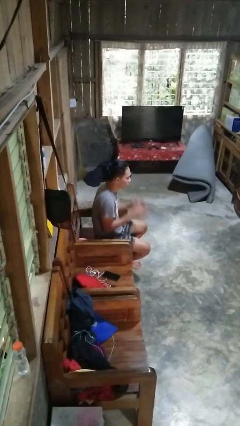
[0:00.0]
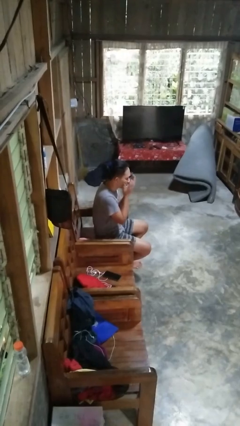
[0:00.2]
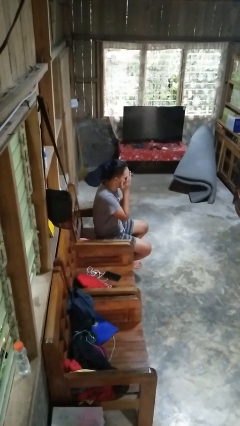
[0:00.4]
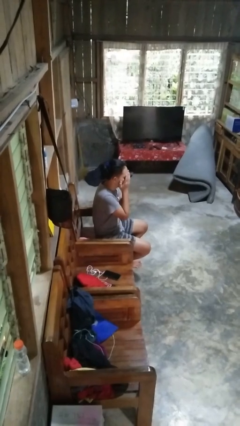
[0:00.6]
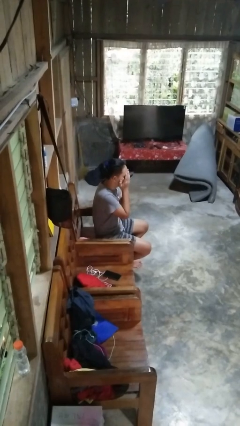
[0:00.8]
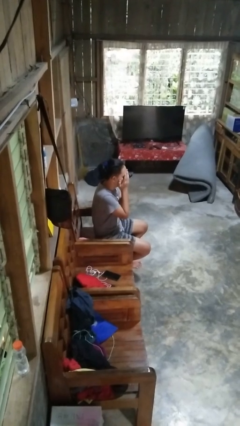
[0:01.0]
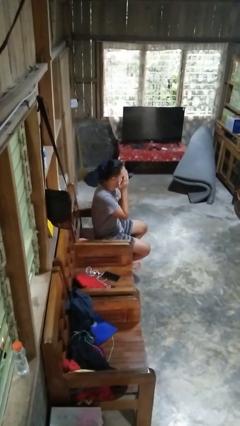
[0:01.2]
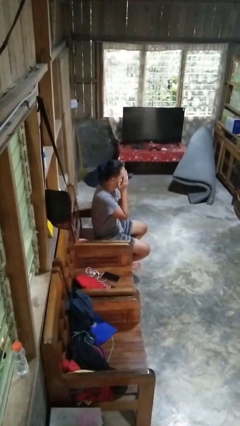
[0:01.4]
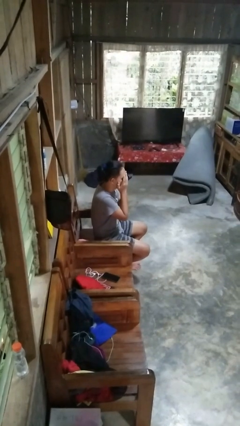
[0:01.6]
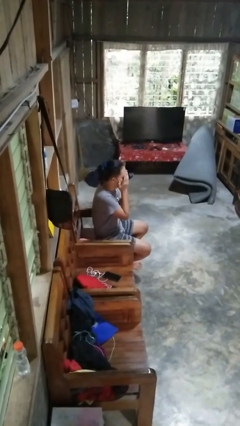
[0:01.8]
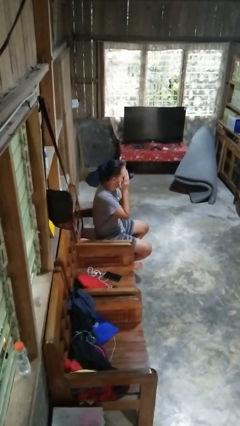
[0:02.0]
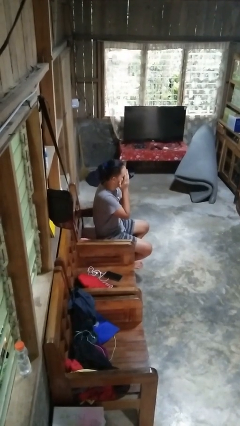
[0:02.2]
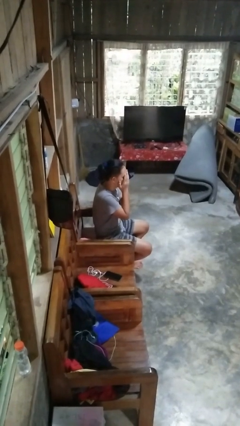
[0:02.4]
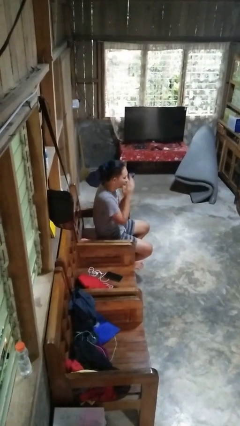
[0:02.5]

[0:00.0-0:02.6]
person covers face with hands

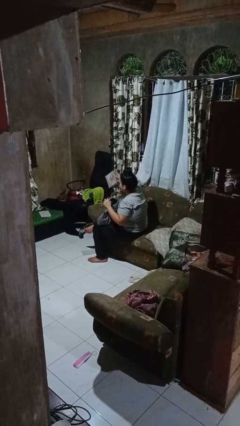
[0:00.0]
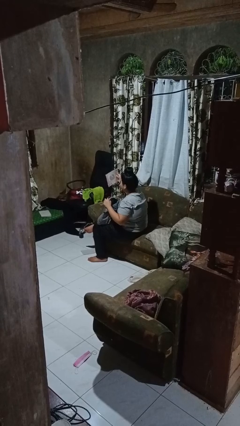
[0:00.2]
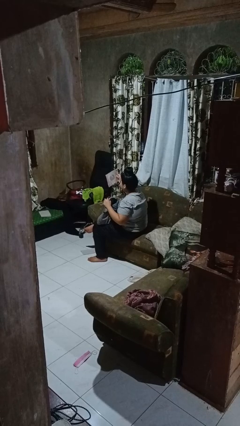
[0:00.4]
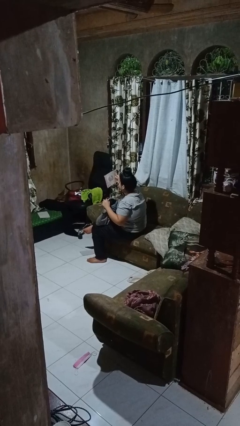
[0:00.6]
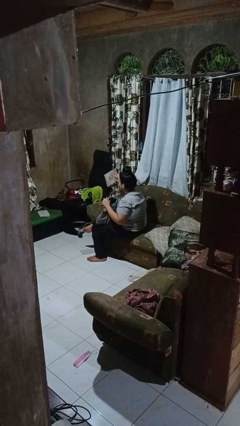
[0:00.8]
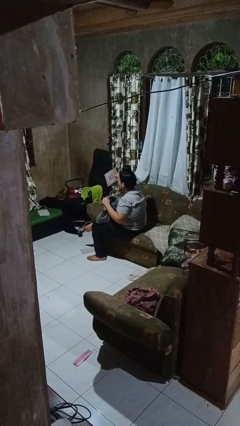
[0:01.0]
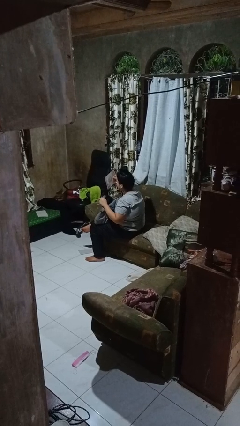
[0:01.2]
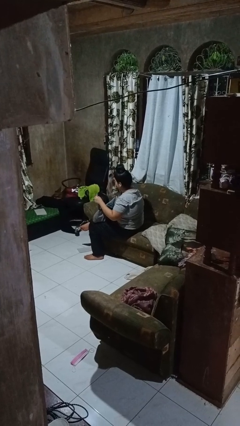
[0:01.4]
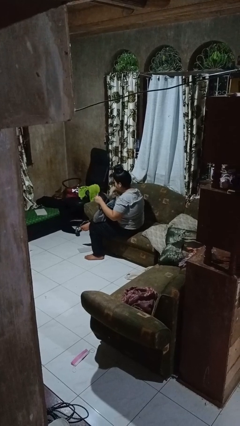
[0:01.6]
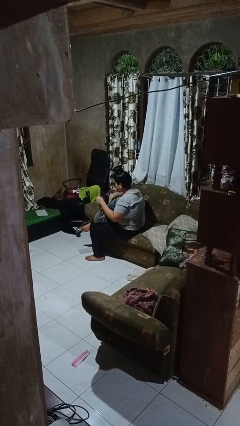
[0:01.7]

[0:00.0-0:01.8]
person takes object from backpack

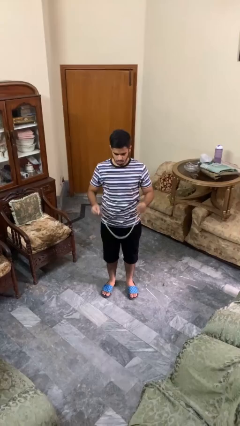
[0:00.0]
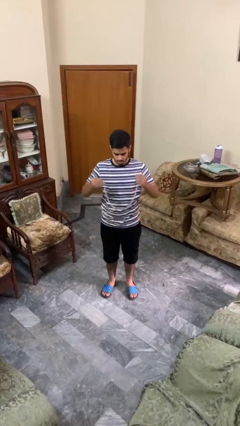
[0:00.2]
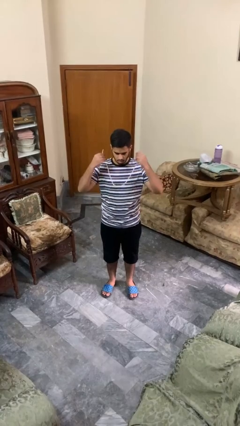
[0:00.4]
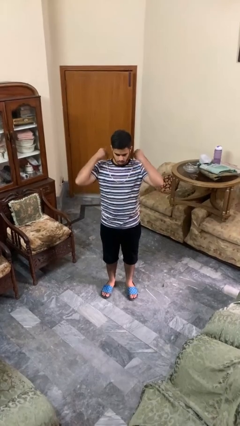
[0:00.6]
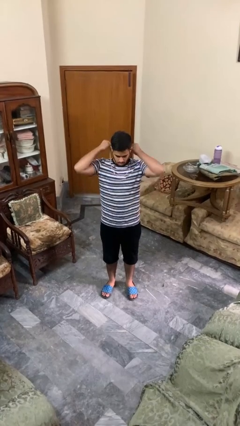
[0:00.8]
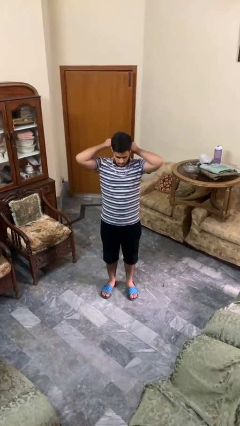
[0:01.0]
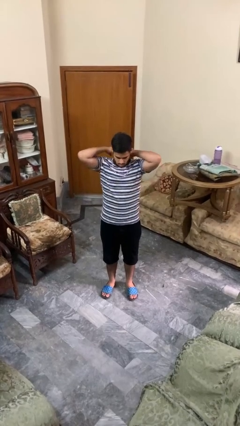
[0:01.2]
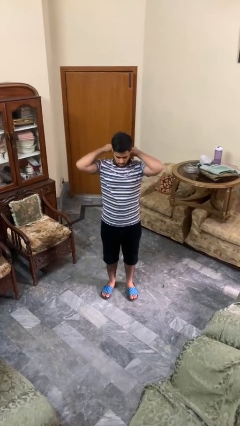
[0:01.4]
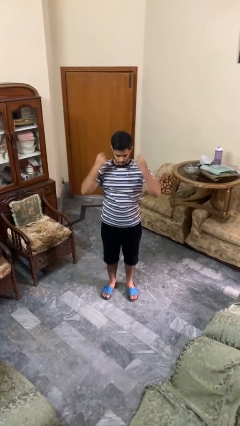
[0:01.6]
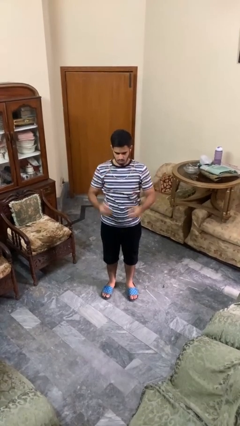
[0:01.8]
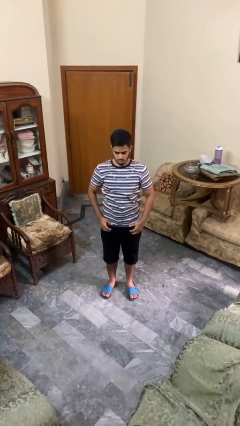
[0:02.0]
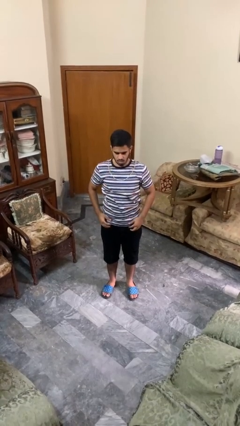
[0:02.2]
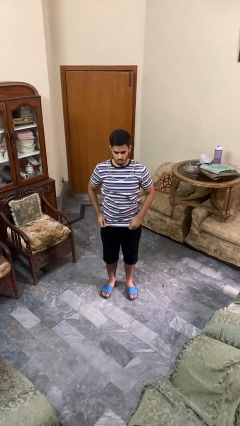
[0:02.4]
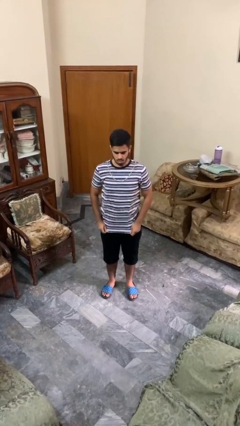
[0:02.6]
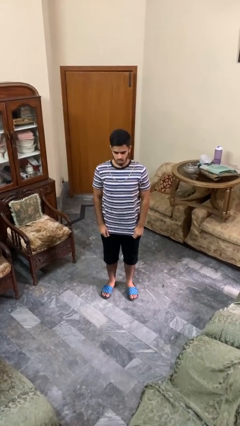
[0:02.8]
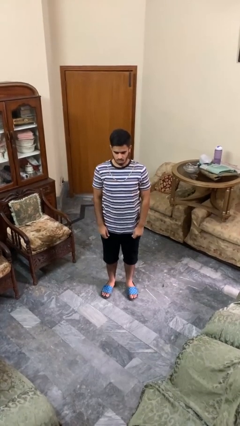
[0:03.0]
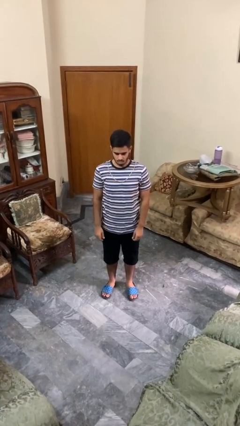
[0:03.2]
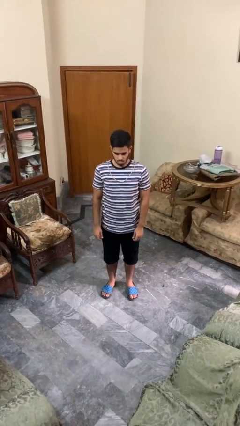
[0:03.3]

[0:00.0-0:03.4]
person puts on necklace

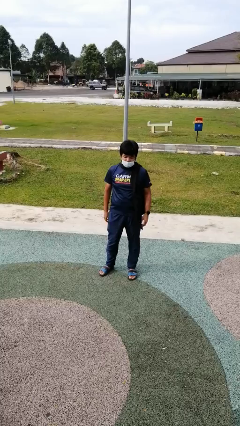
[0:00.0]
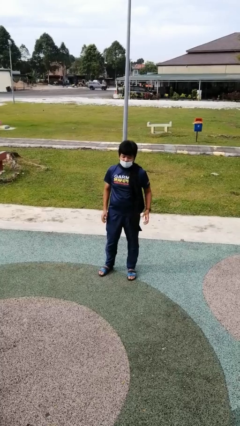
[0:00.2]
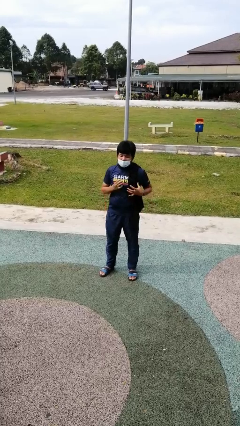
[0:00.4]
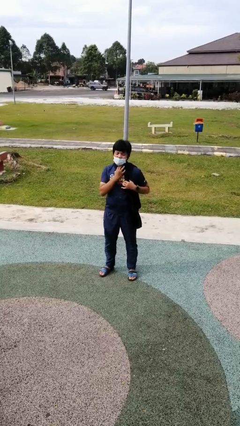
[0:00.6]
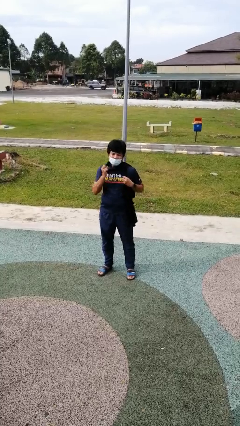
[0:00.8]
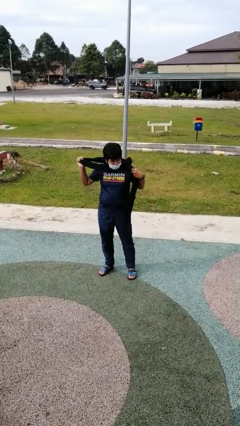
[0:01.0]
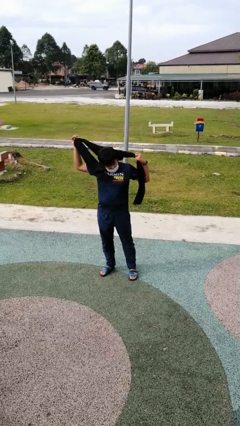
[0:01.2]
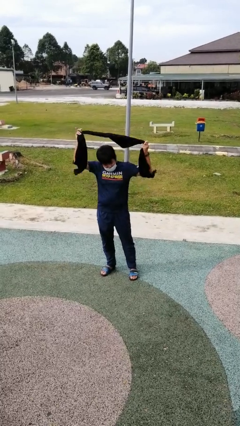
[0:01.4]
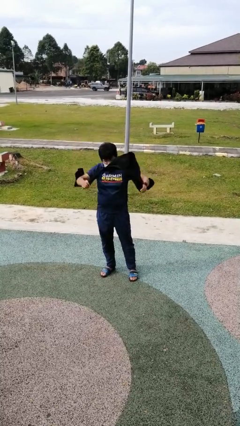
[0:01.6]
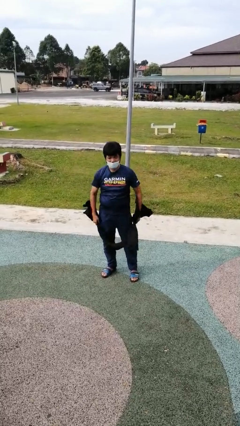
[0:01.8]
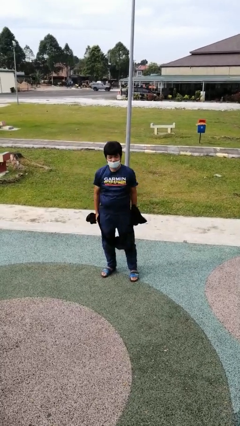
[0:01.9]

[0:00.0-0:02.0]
person takes off scarf

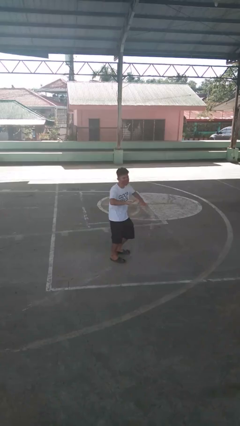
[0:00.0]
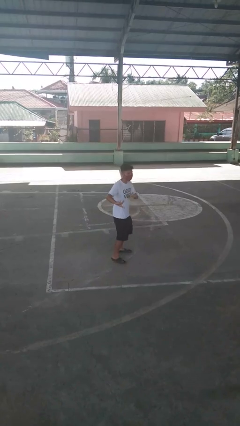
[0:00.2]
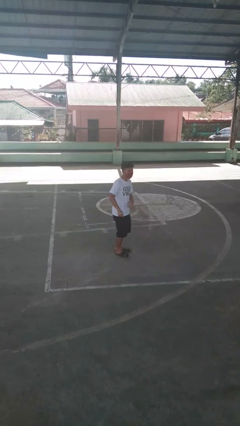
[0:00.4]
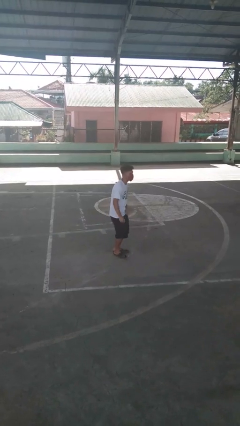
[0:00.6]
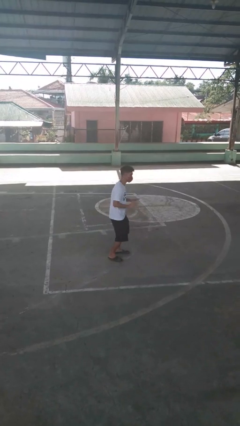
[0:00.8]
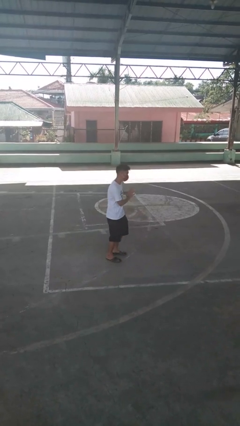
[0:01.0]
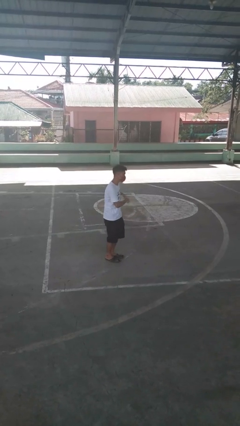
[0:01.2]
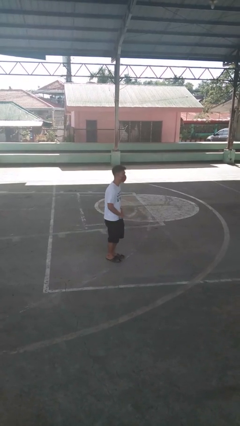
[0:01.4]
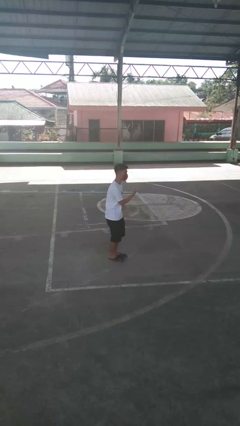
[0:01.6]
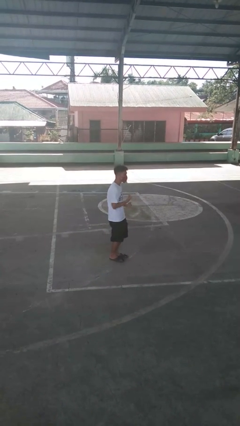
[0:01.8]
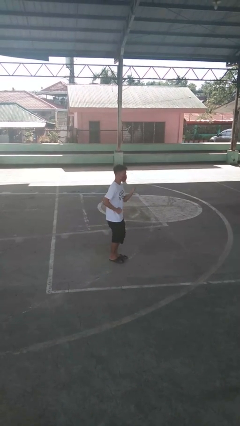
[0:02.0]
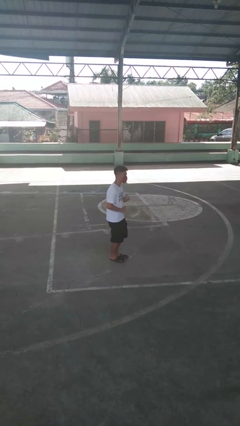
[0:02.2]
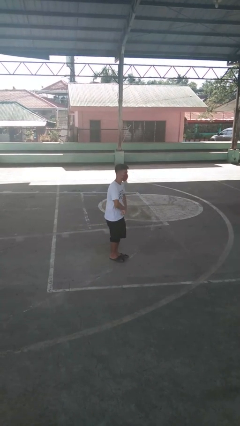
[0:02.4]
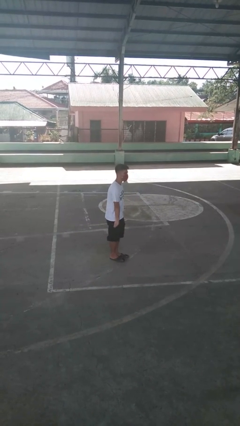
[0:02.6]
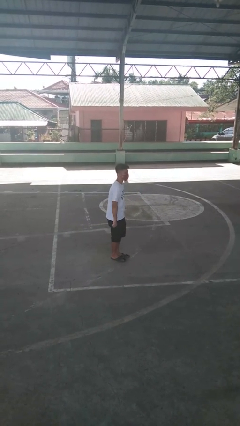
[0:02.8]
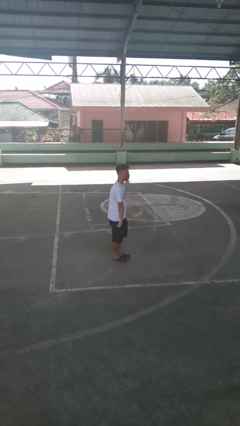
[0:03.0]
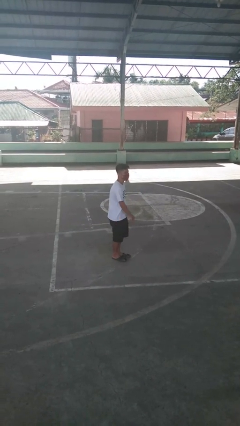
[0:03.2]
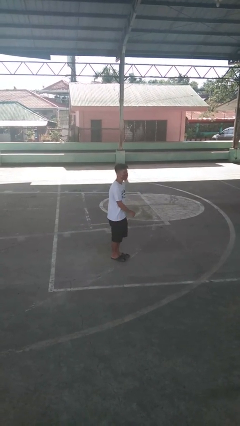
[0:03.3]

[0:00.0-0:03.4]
person dances in place

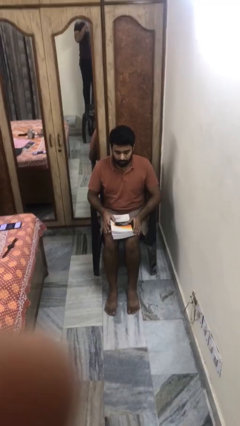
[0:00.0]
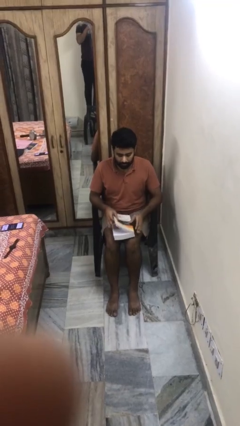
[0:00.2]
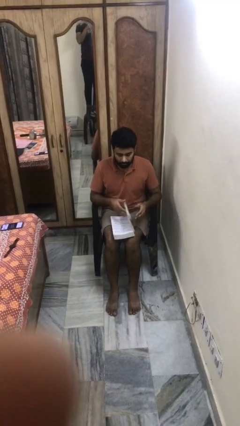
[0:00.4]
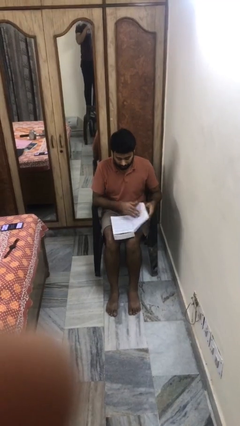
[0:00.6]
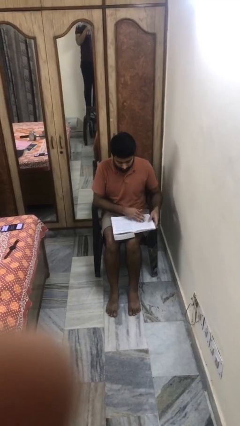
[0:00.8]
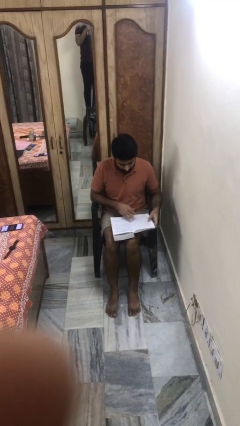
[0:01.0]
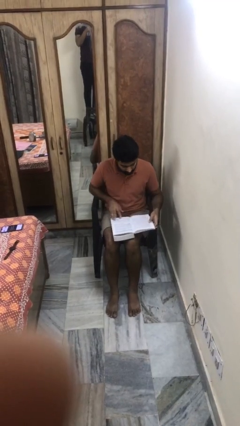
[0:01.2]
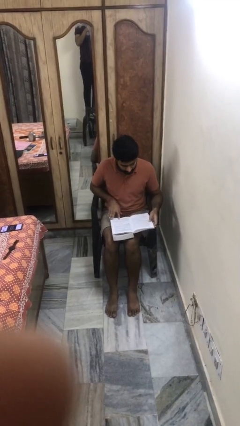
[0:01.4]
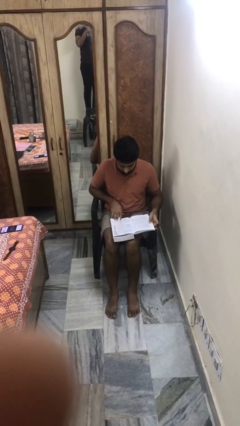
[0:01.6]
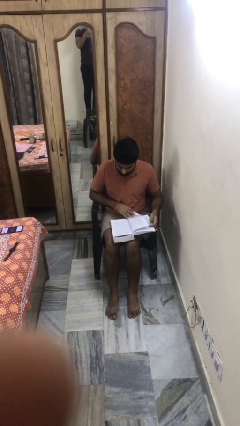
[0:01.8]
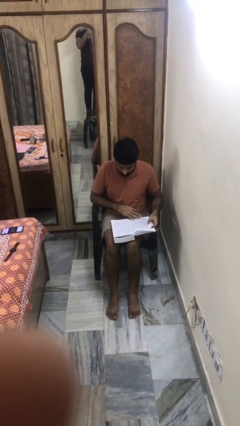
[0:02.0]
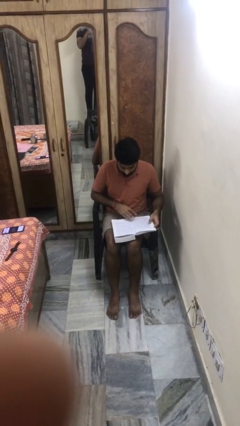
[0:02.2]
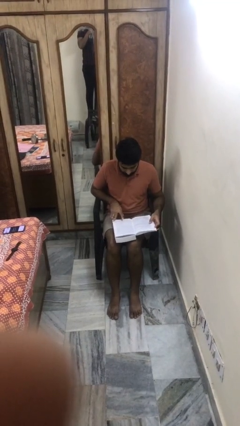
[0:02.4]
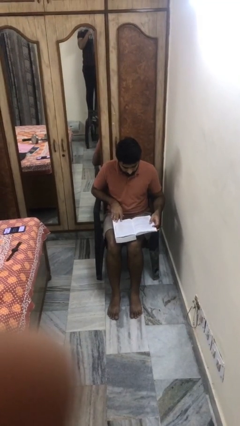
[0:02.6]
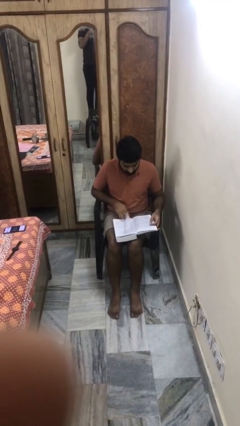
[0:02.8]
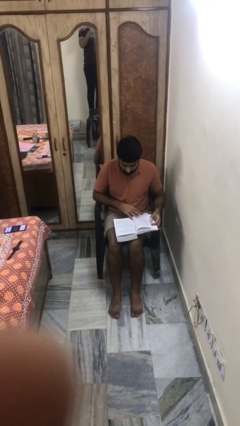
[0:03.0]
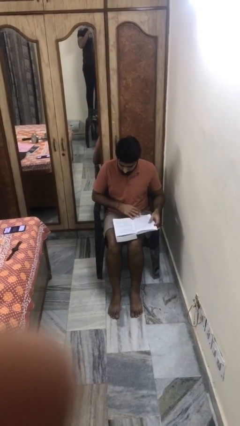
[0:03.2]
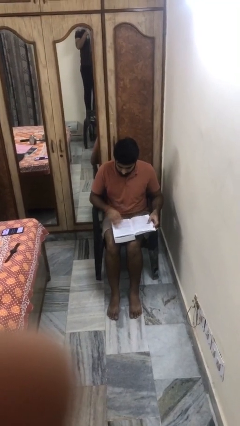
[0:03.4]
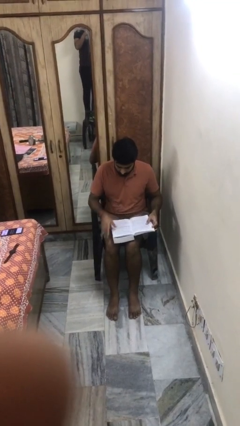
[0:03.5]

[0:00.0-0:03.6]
person reads book

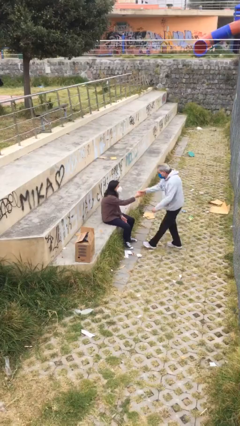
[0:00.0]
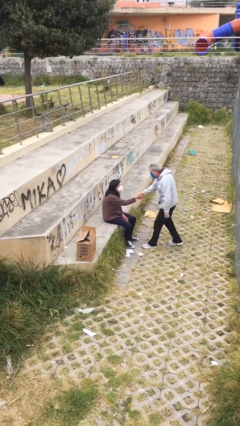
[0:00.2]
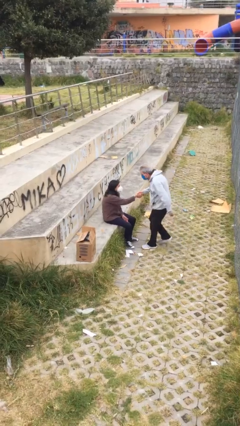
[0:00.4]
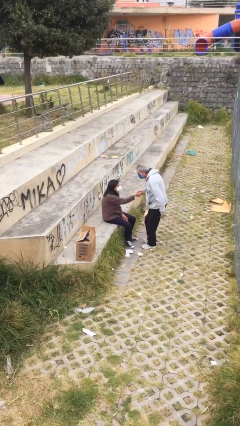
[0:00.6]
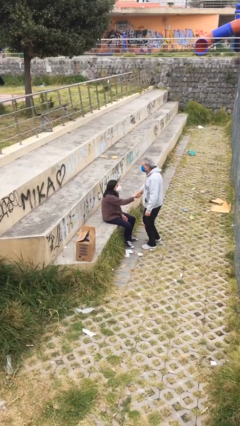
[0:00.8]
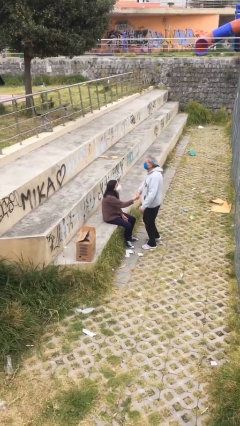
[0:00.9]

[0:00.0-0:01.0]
person shakes hand
